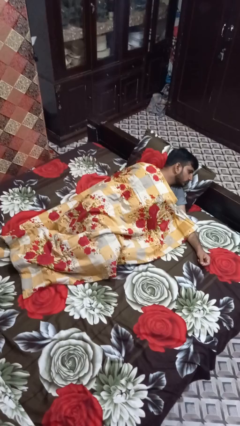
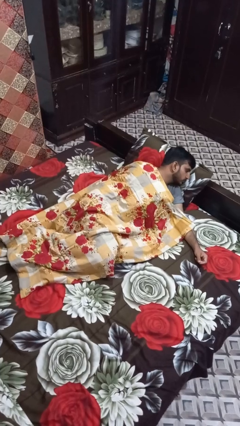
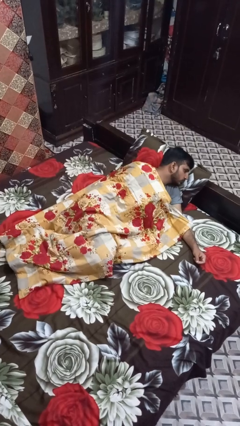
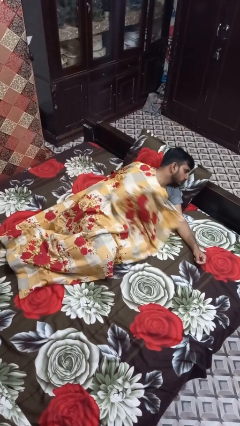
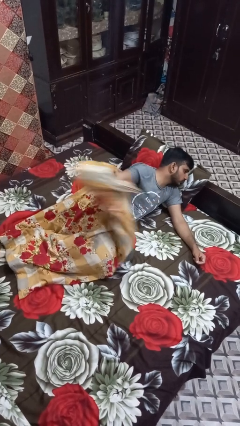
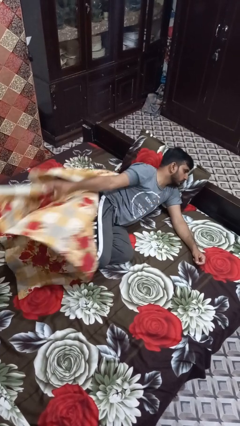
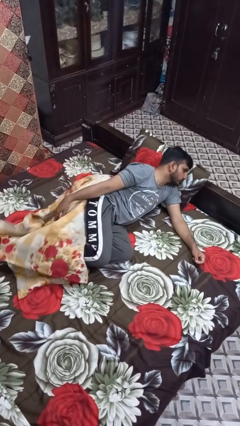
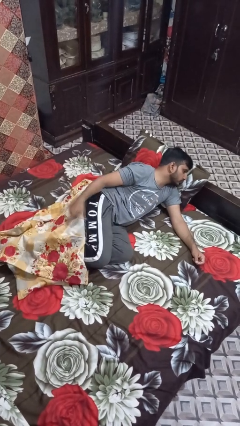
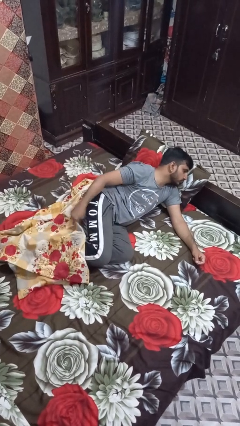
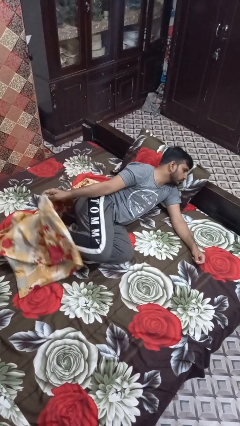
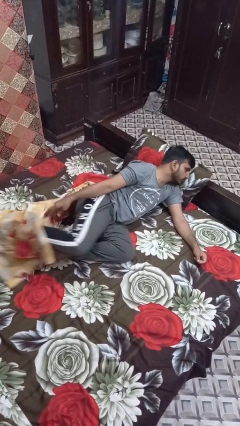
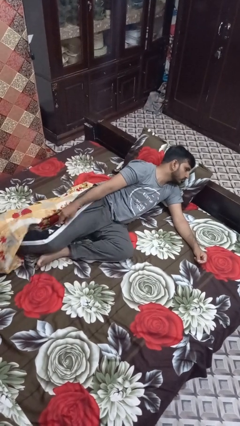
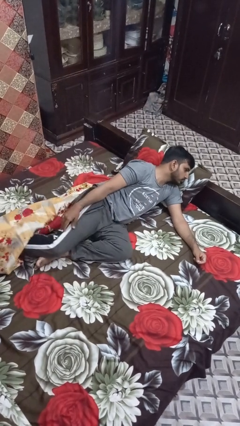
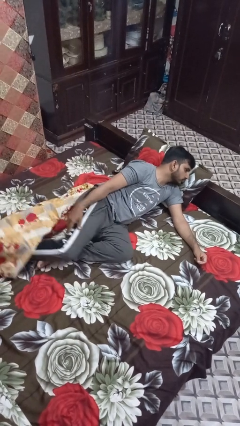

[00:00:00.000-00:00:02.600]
person uncovers with bedsheets

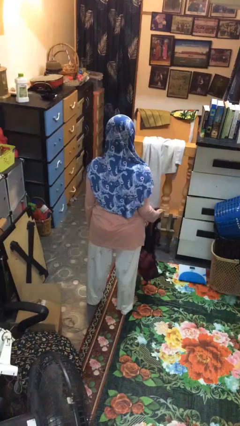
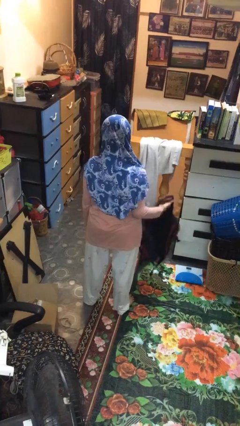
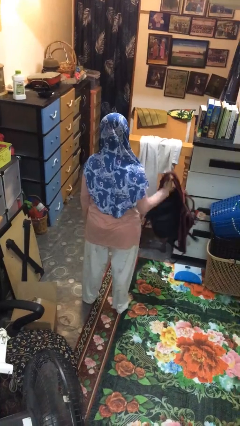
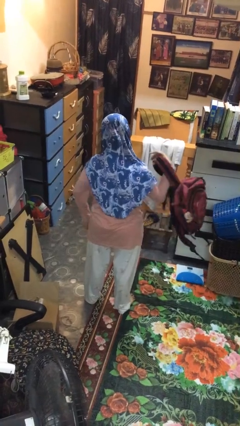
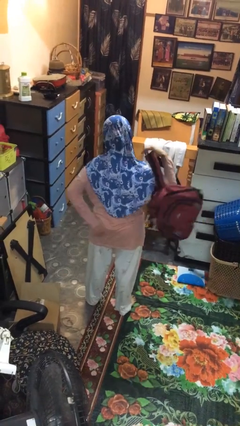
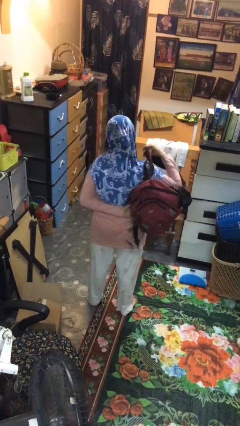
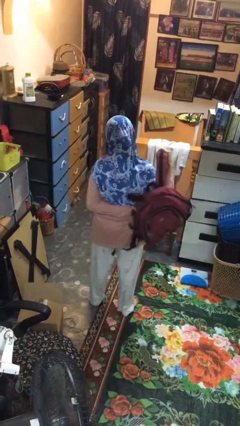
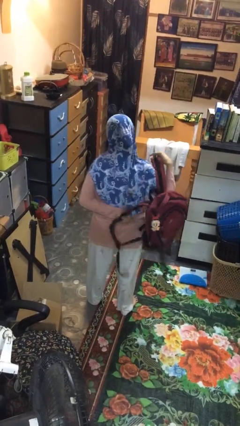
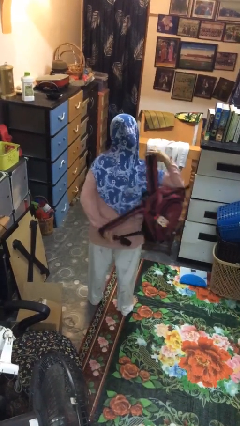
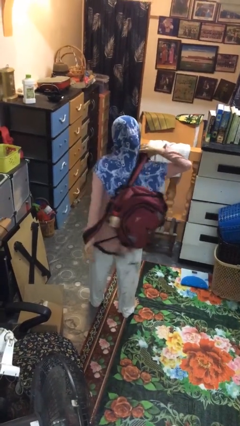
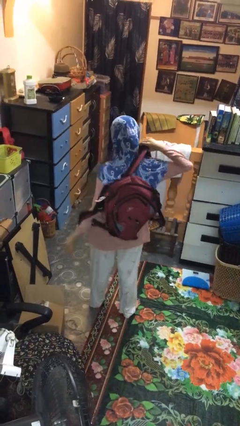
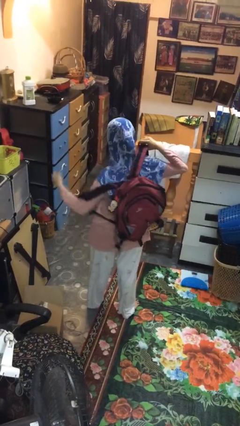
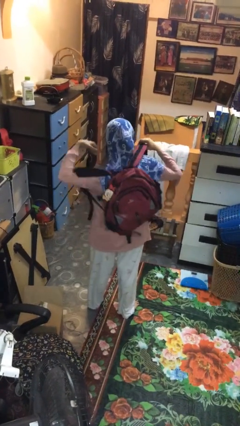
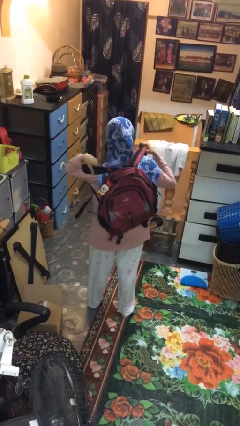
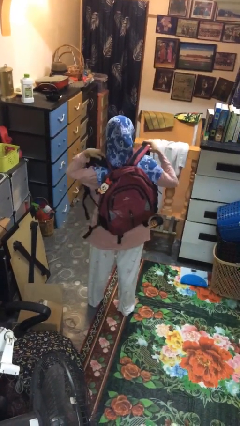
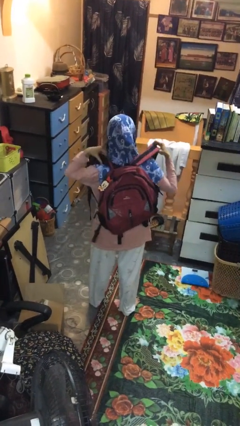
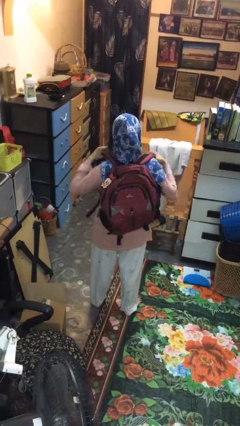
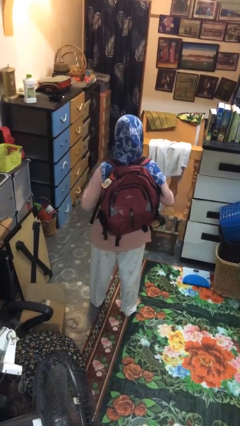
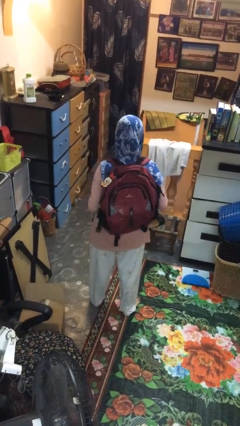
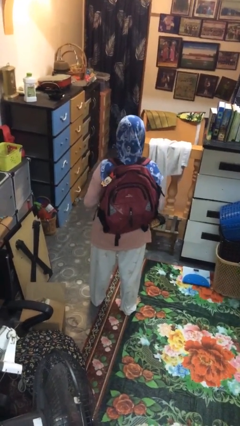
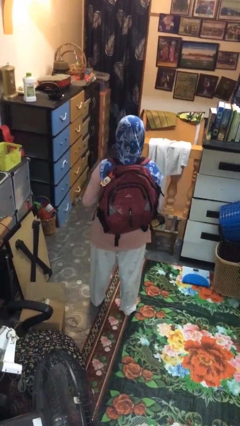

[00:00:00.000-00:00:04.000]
person puts on backpack

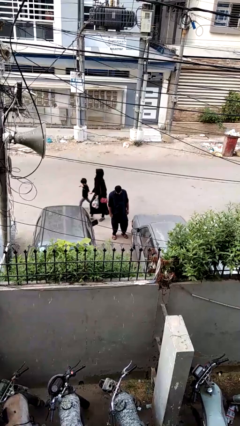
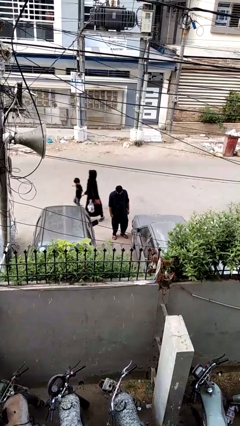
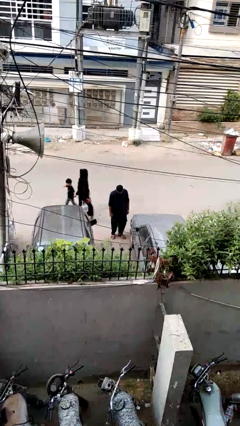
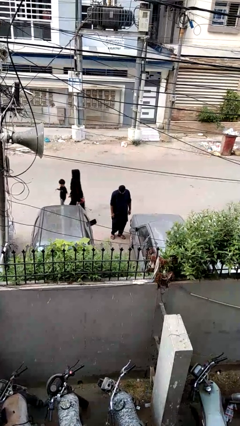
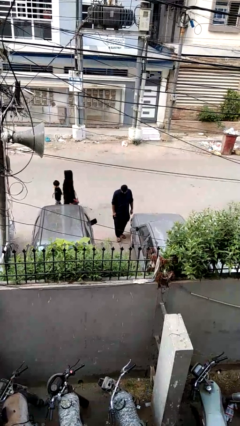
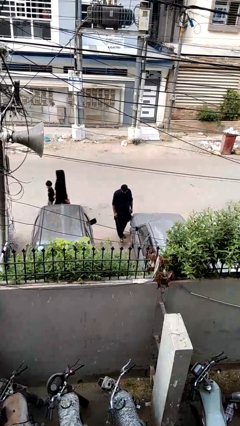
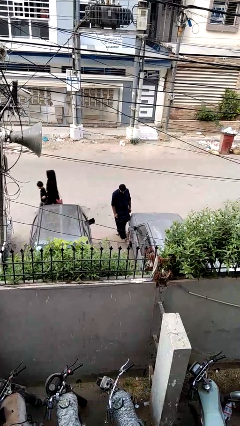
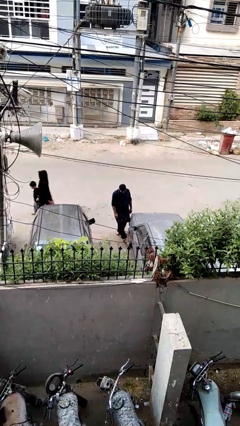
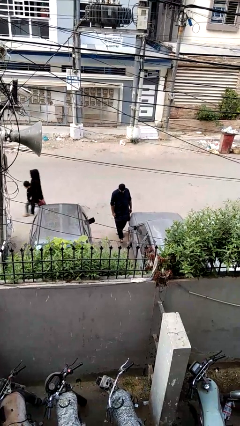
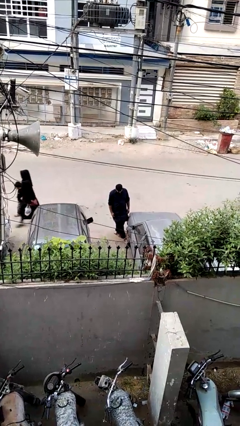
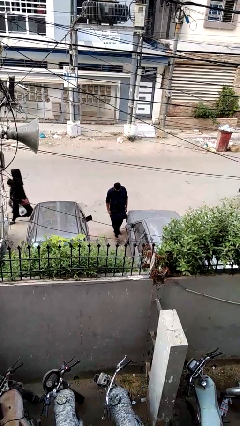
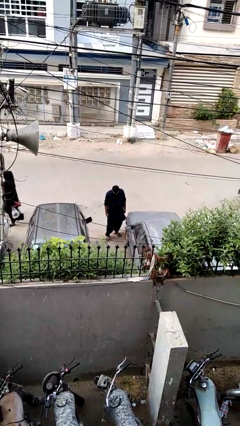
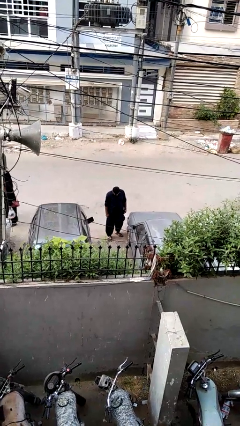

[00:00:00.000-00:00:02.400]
person kicks car tires

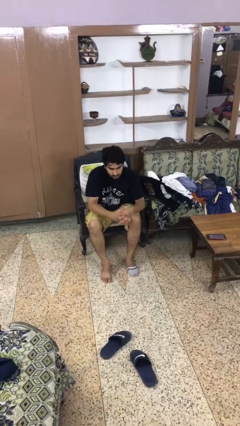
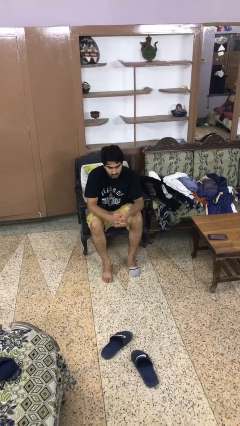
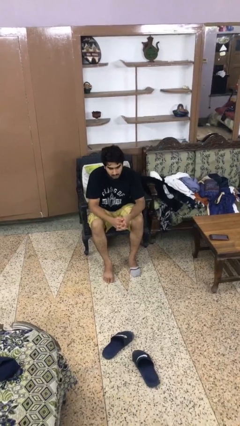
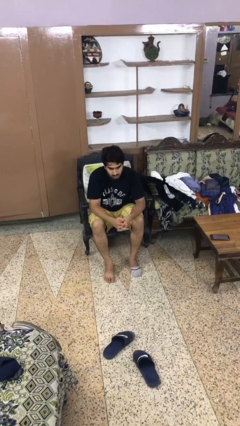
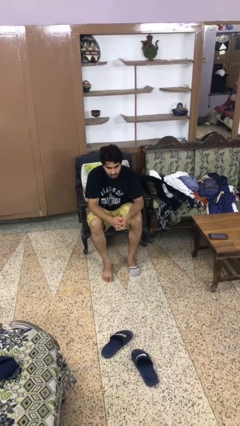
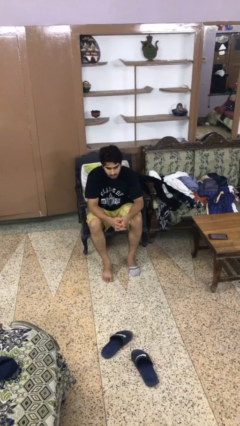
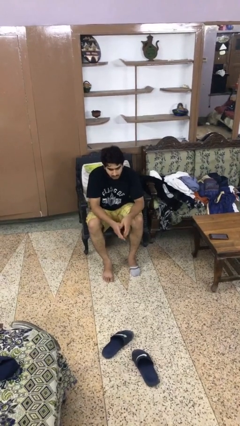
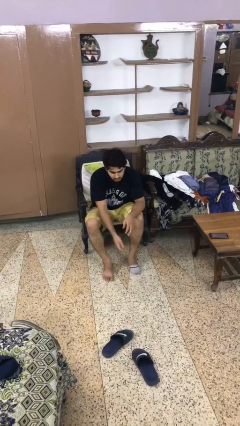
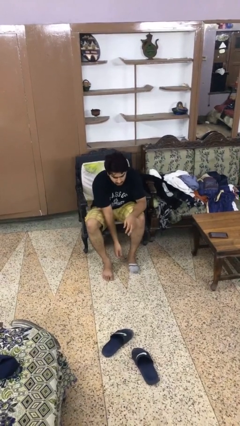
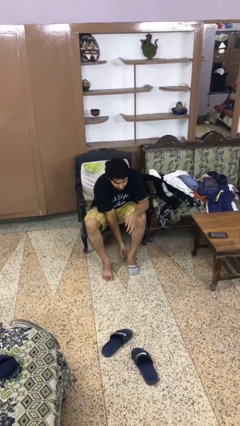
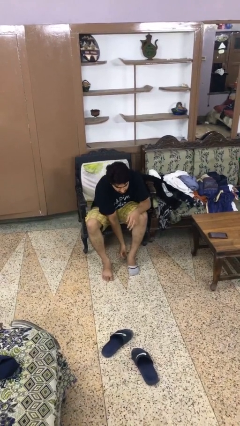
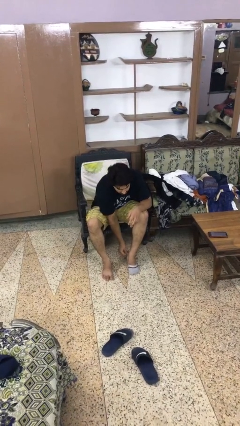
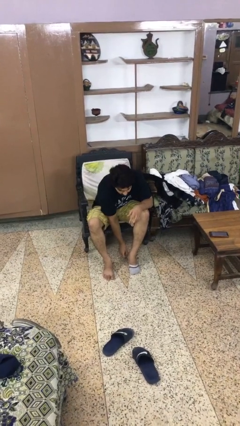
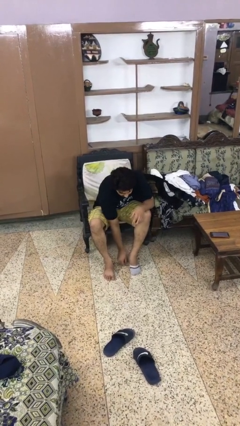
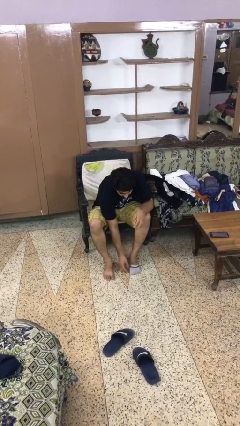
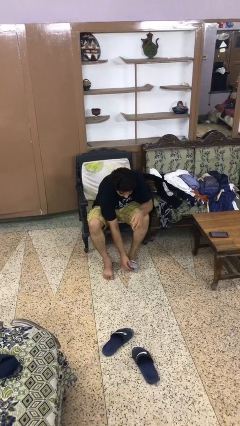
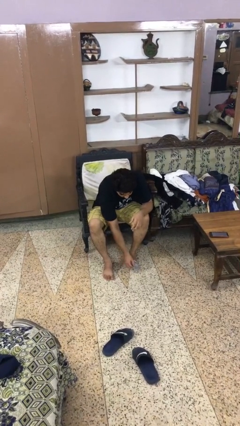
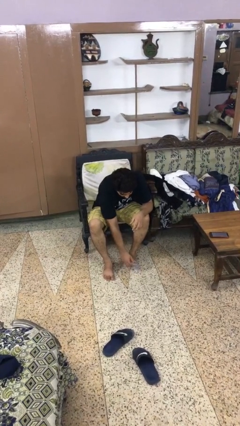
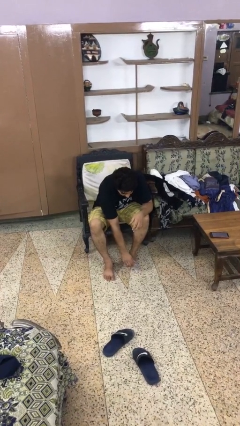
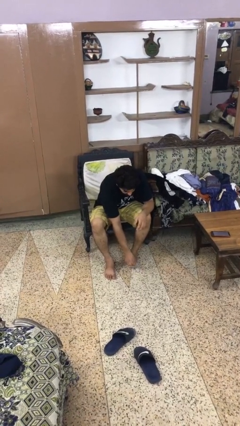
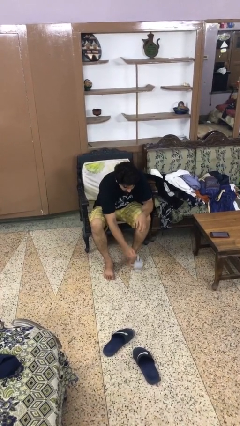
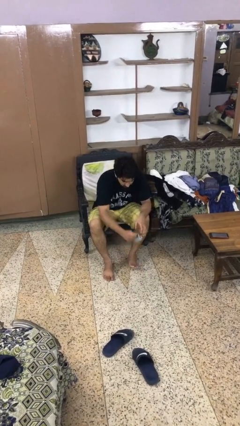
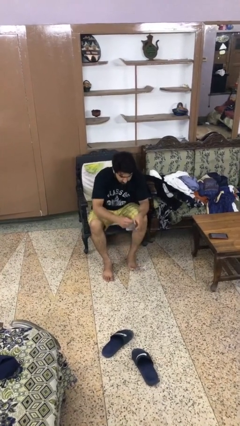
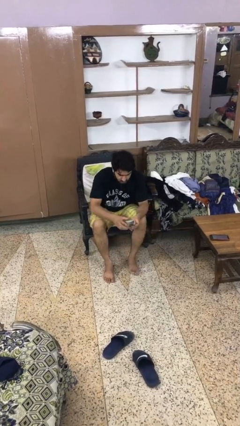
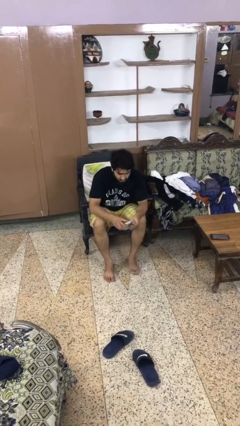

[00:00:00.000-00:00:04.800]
person takes off socks

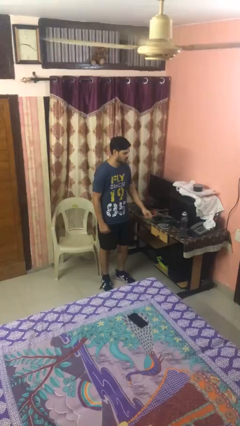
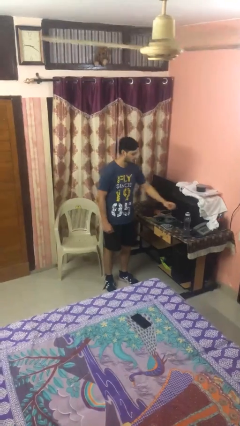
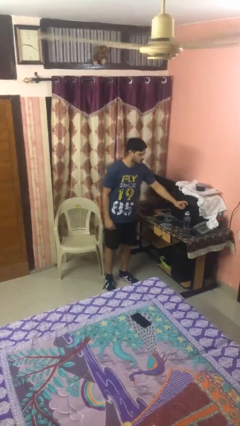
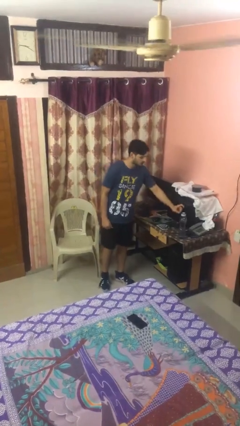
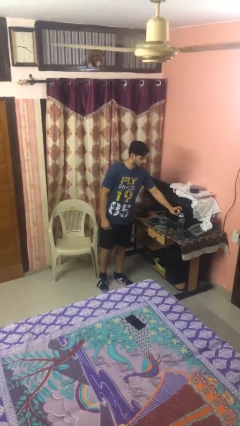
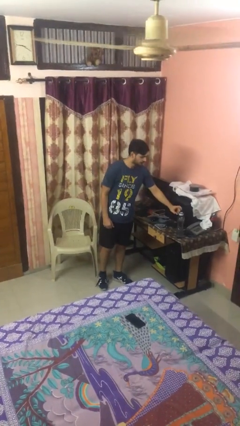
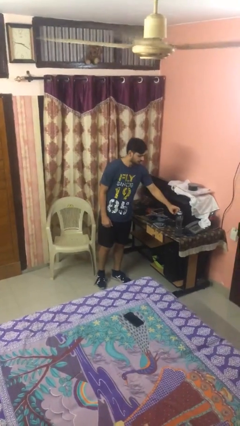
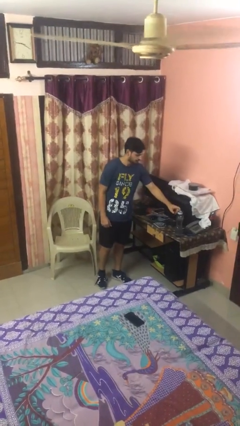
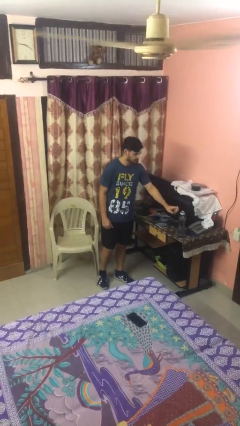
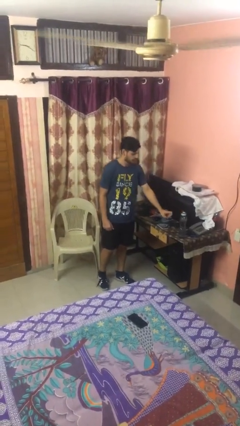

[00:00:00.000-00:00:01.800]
person taps object with finger

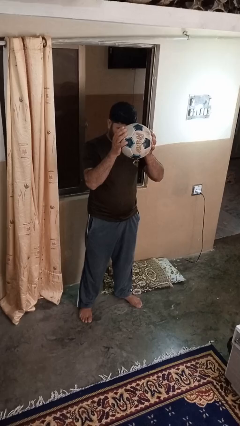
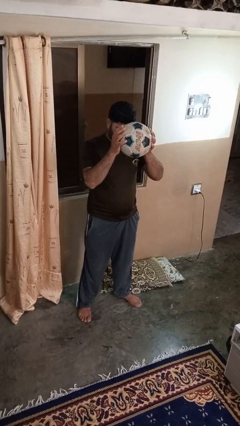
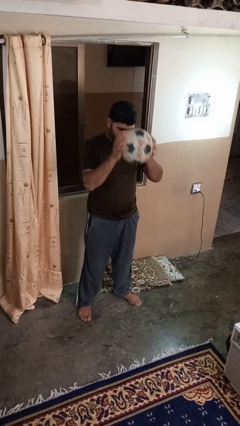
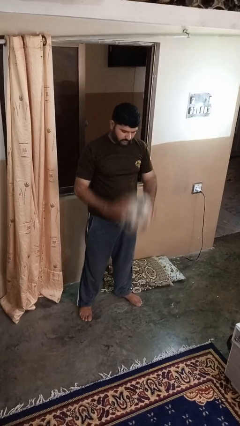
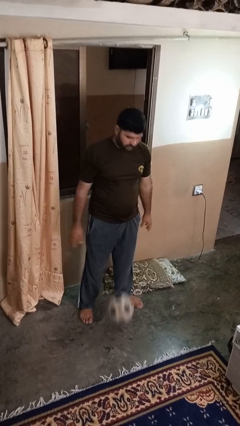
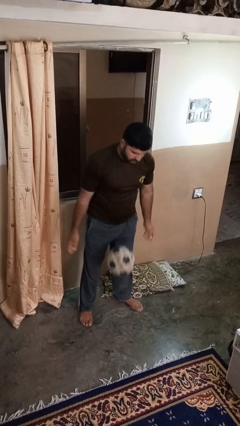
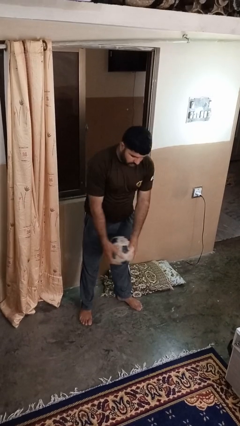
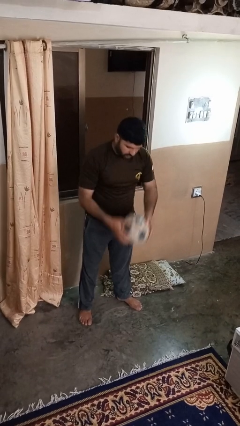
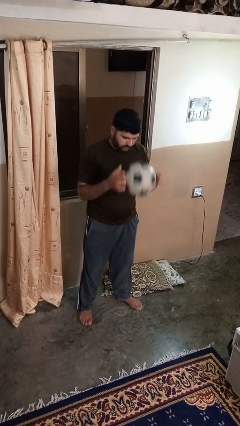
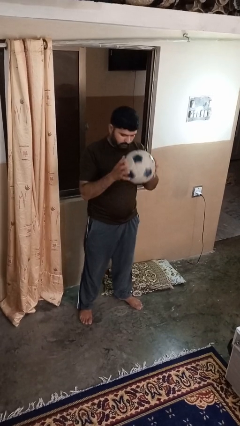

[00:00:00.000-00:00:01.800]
person bounces ball on floor
